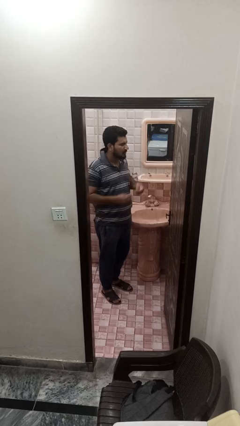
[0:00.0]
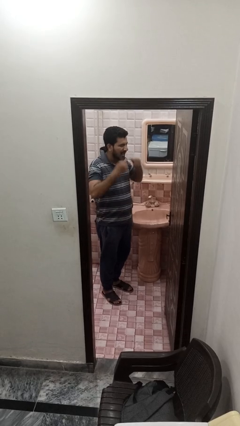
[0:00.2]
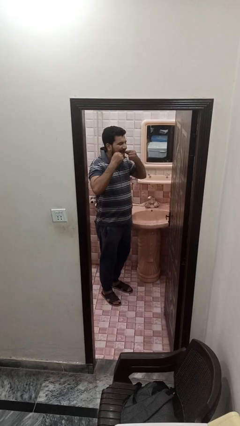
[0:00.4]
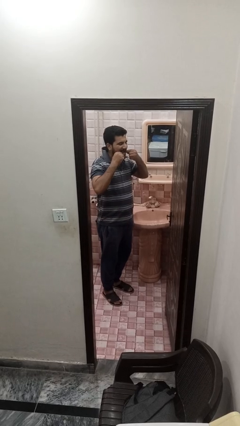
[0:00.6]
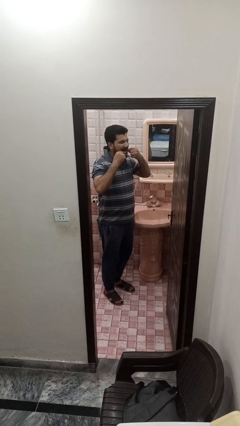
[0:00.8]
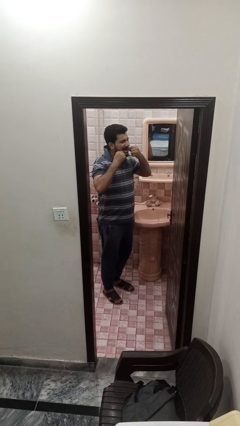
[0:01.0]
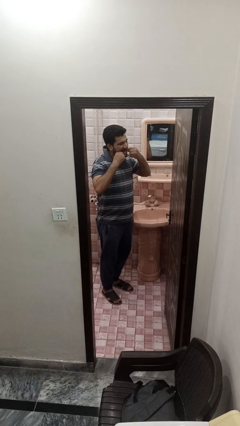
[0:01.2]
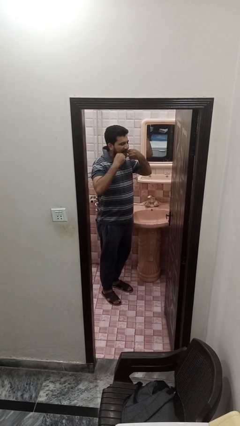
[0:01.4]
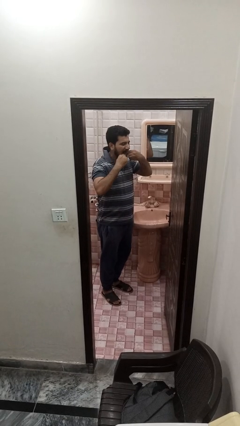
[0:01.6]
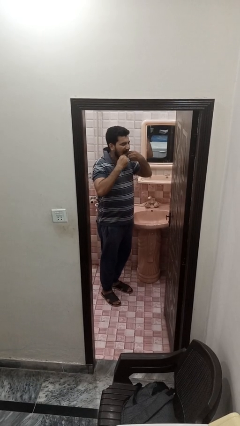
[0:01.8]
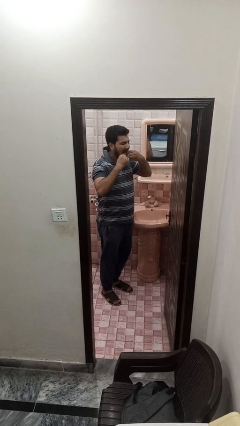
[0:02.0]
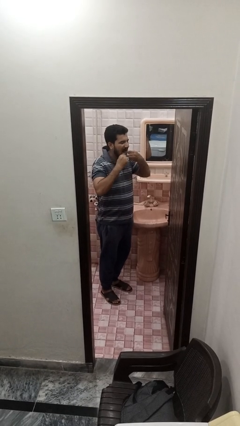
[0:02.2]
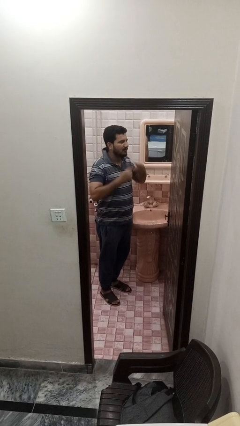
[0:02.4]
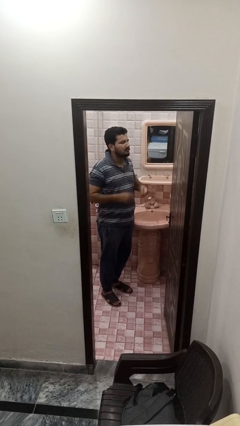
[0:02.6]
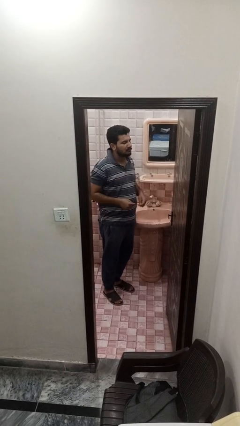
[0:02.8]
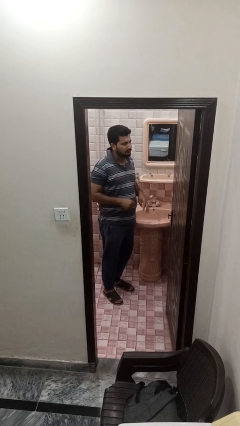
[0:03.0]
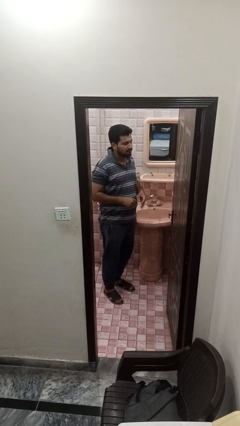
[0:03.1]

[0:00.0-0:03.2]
person flosses

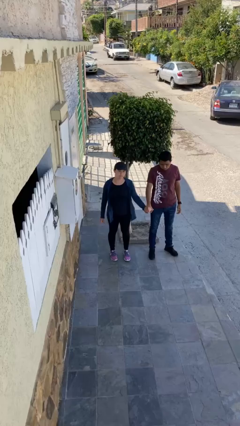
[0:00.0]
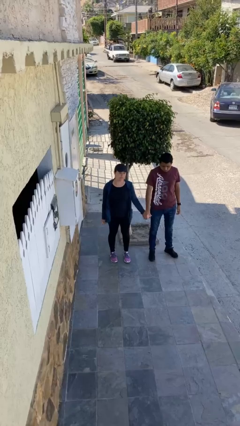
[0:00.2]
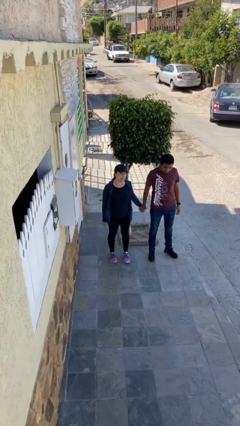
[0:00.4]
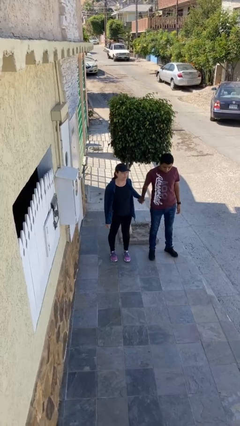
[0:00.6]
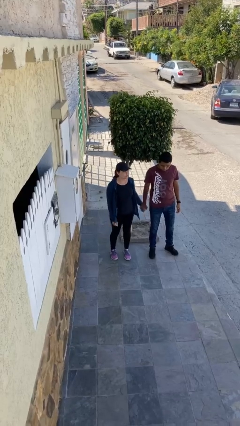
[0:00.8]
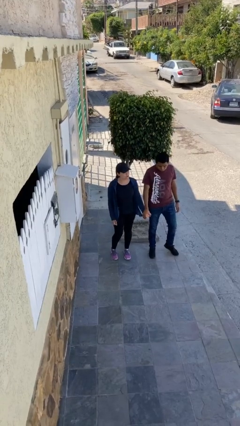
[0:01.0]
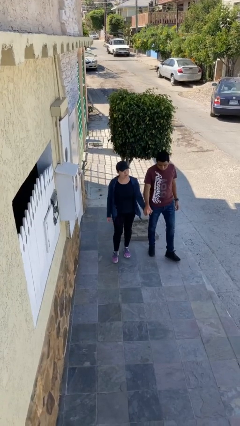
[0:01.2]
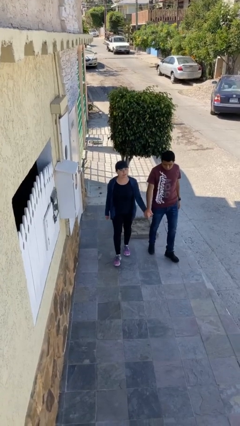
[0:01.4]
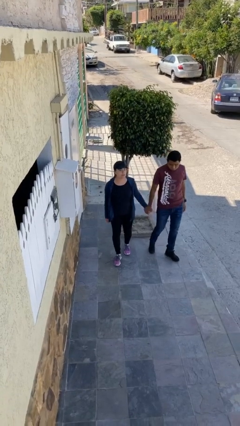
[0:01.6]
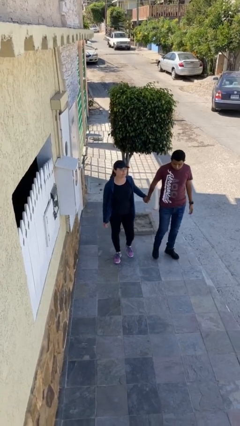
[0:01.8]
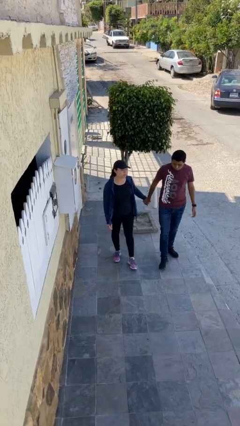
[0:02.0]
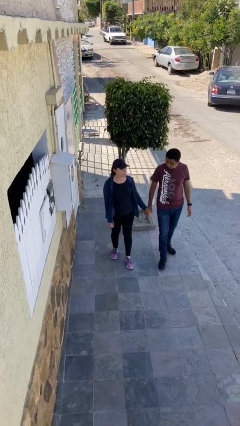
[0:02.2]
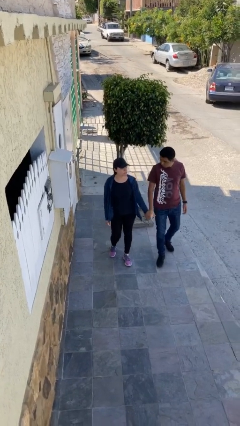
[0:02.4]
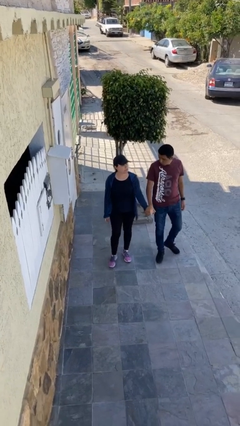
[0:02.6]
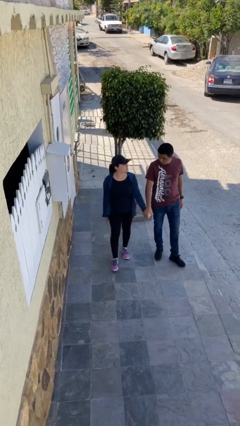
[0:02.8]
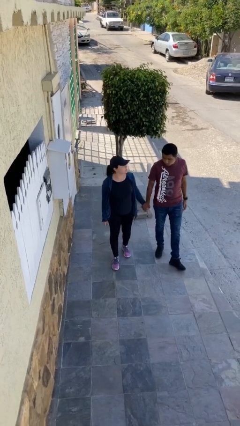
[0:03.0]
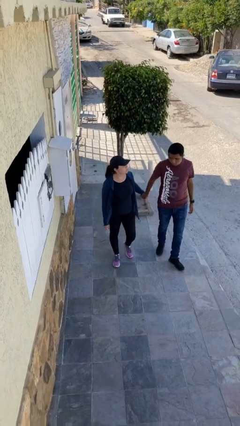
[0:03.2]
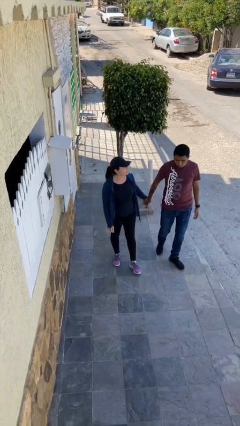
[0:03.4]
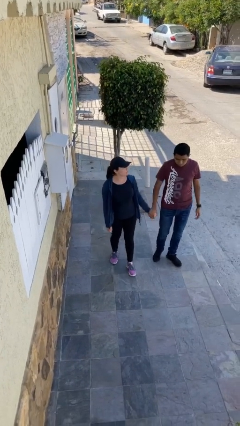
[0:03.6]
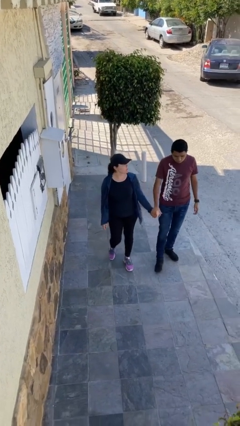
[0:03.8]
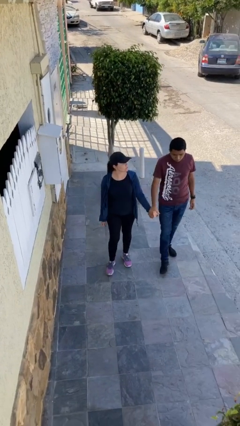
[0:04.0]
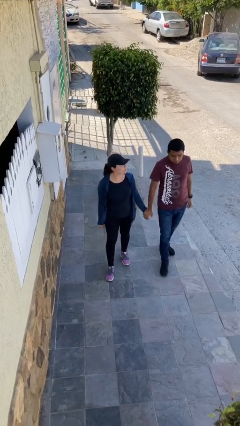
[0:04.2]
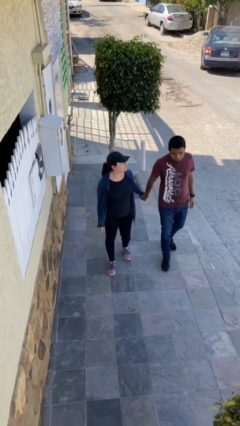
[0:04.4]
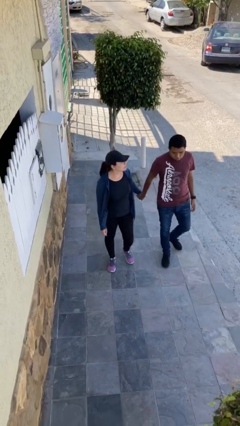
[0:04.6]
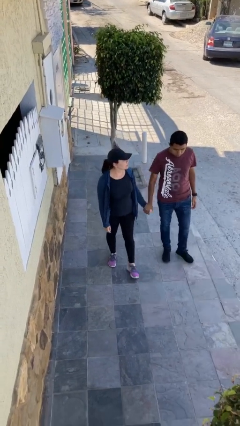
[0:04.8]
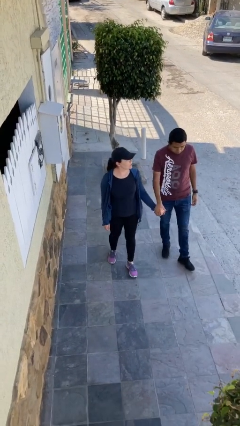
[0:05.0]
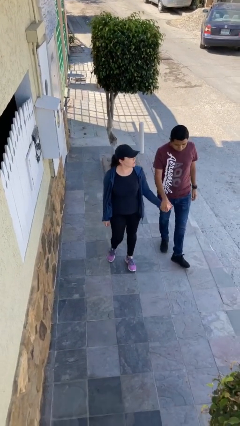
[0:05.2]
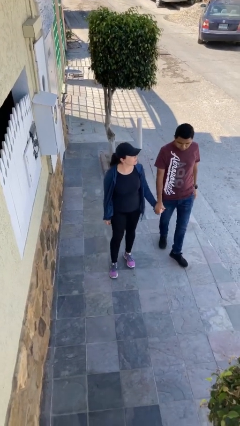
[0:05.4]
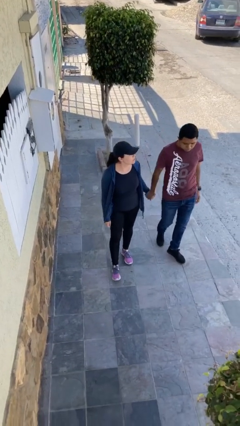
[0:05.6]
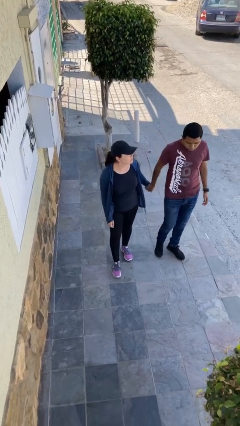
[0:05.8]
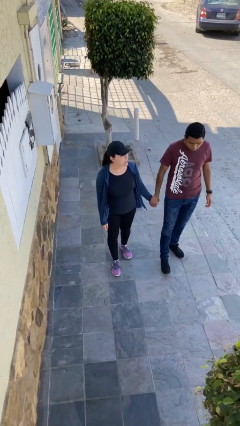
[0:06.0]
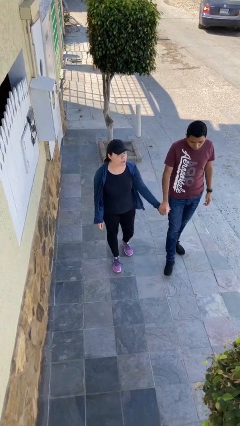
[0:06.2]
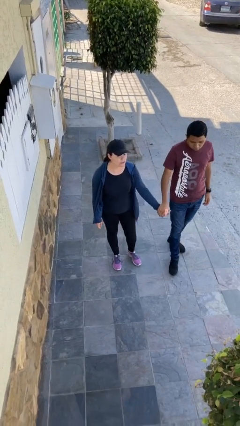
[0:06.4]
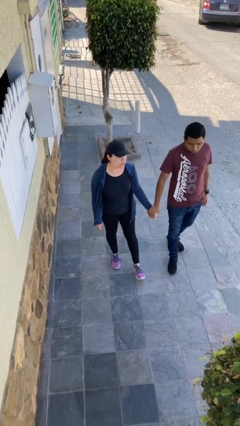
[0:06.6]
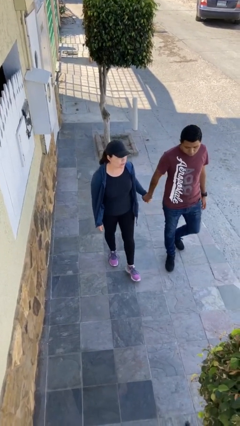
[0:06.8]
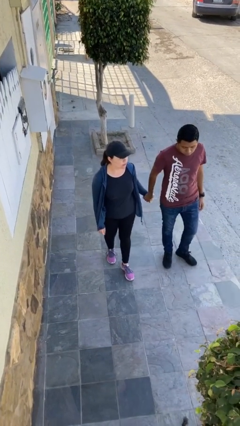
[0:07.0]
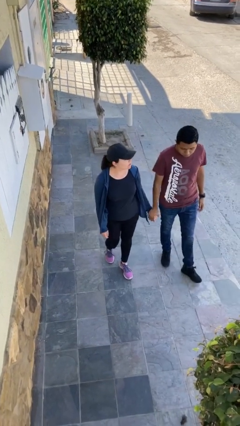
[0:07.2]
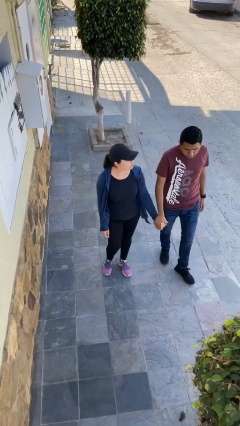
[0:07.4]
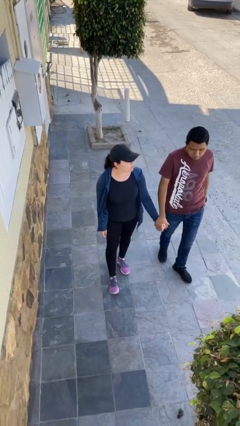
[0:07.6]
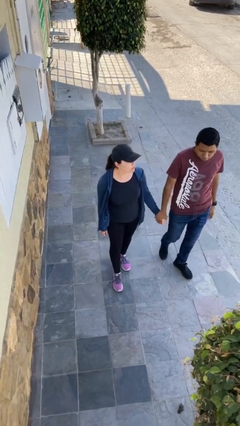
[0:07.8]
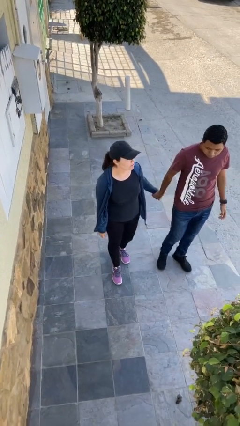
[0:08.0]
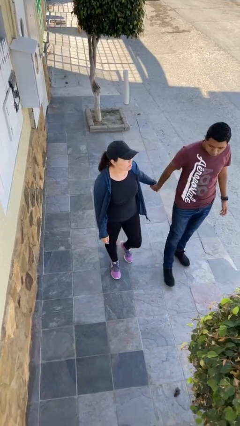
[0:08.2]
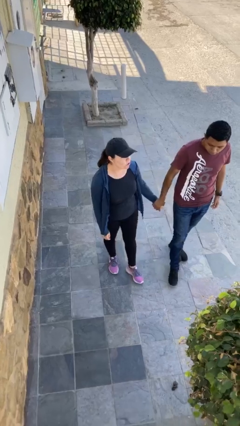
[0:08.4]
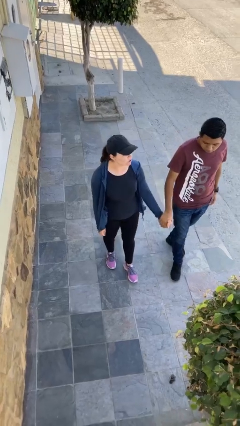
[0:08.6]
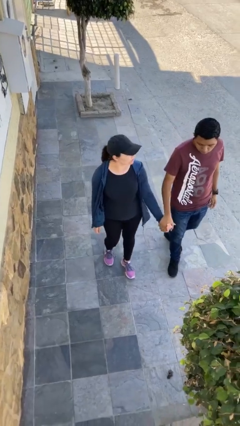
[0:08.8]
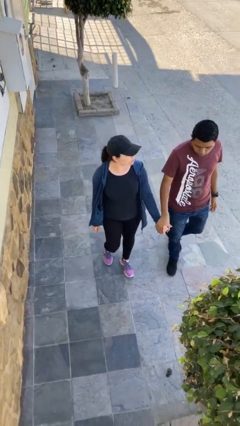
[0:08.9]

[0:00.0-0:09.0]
person holds hand

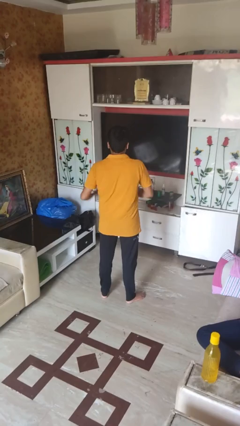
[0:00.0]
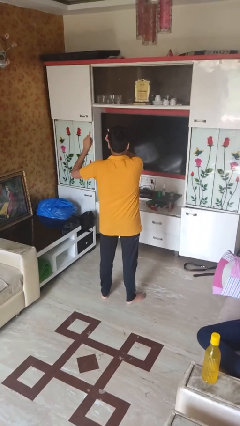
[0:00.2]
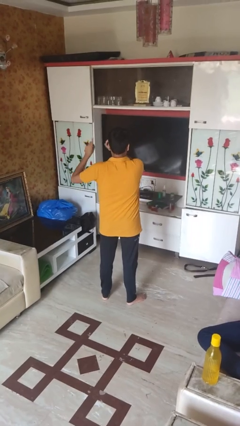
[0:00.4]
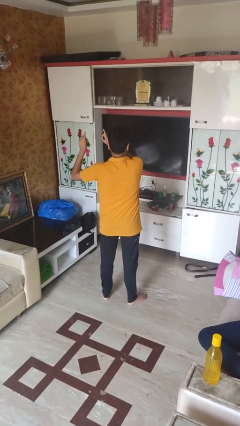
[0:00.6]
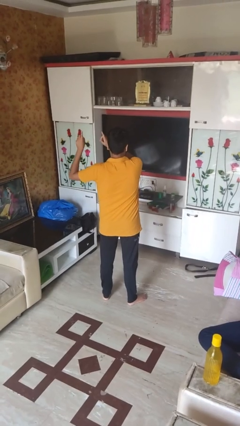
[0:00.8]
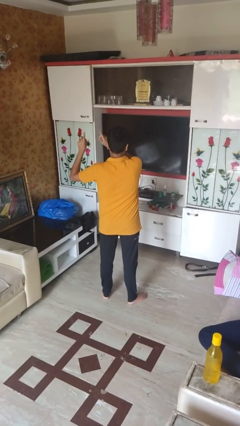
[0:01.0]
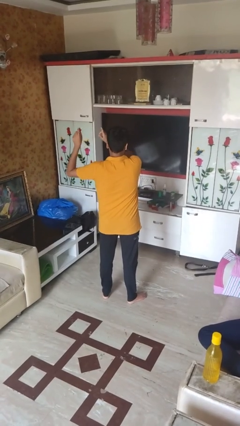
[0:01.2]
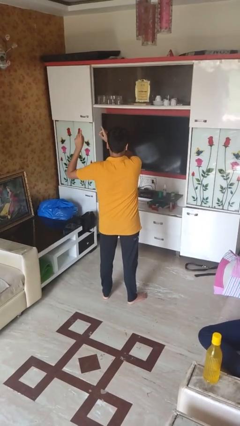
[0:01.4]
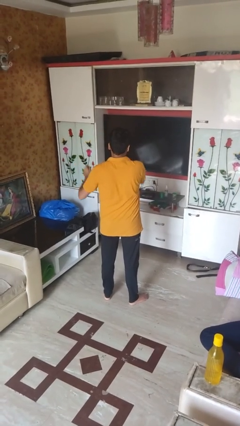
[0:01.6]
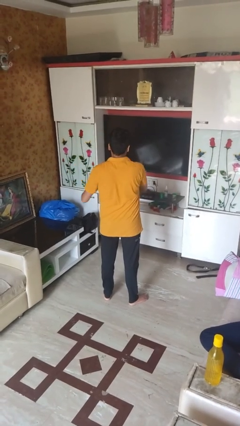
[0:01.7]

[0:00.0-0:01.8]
person dances in place

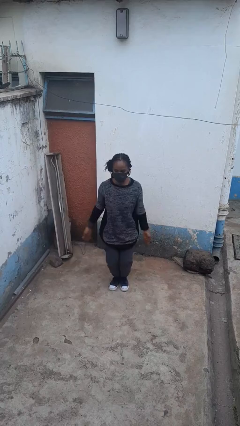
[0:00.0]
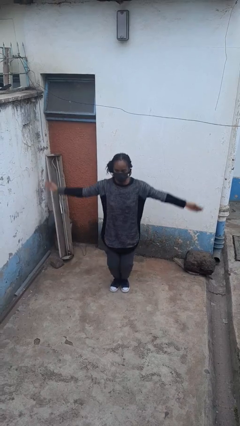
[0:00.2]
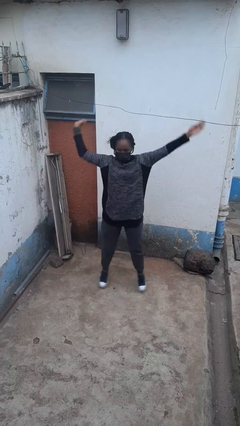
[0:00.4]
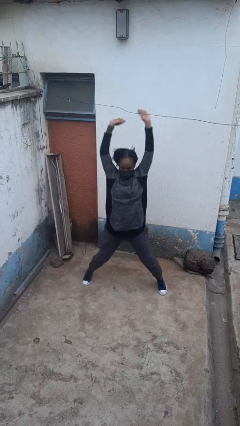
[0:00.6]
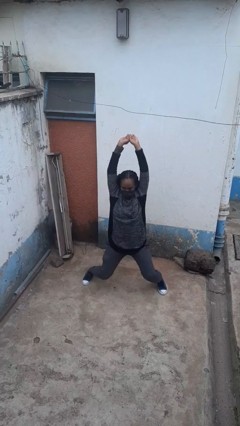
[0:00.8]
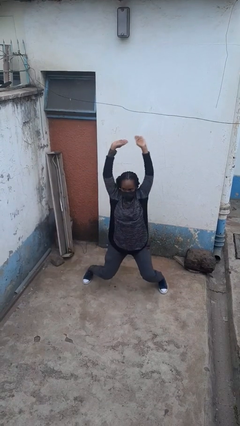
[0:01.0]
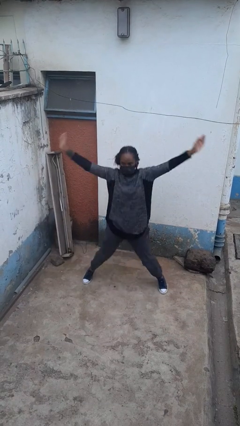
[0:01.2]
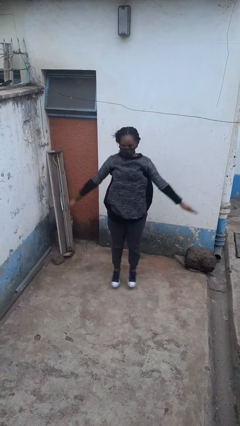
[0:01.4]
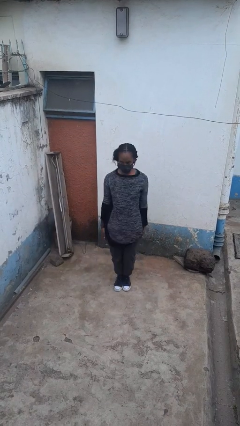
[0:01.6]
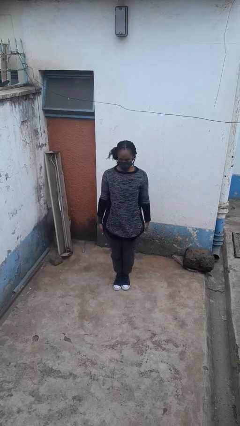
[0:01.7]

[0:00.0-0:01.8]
person exercises with jumping jacks

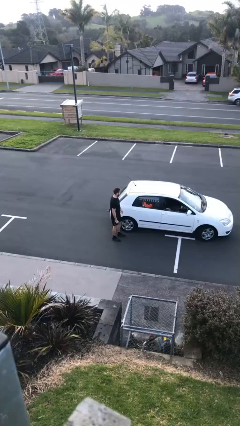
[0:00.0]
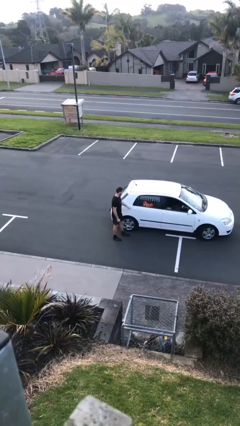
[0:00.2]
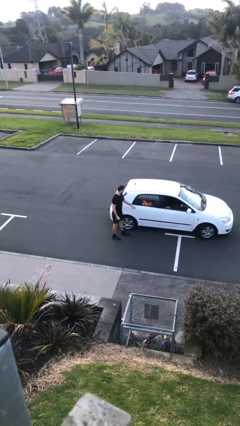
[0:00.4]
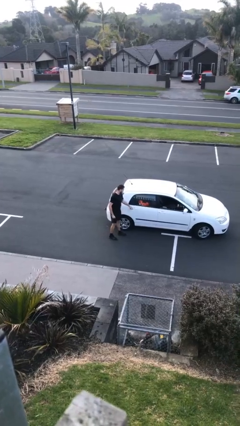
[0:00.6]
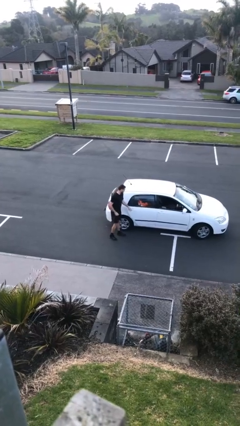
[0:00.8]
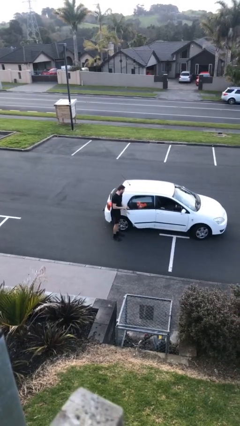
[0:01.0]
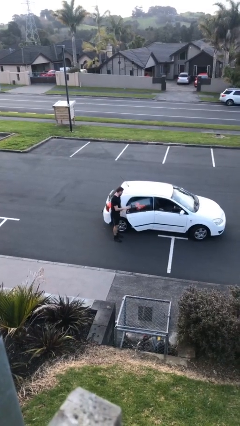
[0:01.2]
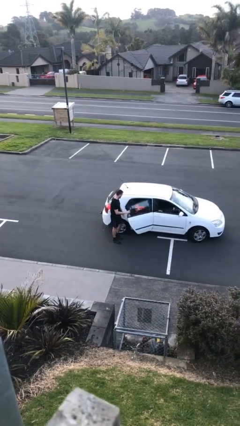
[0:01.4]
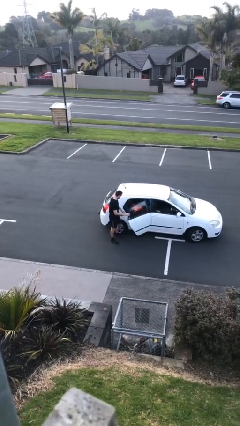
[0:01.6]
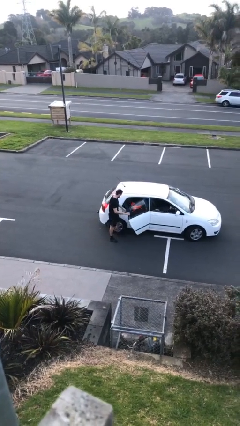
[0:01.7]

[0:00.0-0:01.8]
person opens car door
